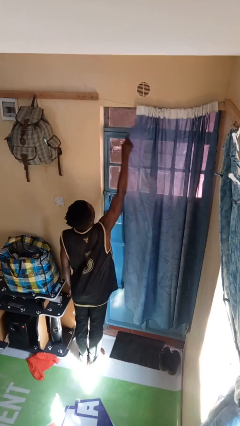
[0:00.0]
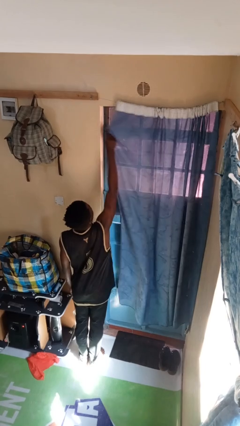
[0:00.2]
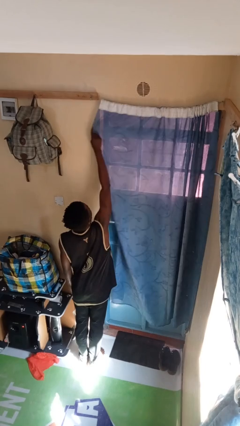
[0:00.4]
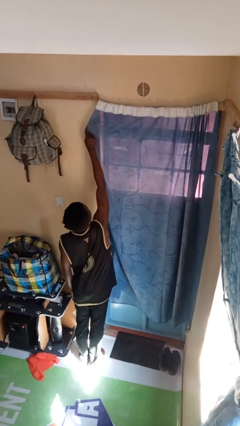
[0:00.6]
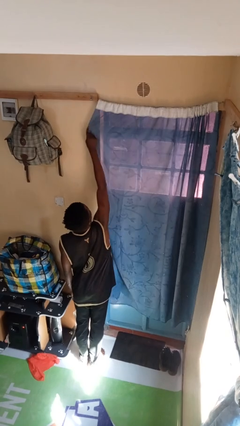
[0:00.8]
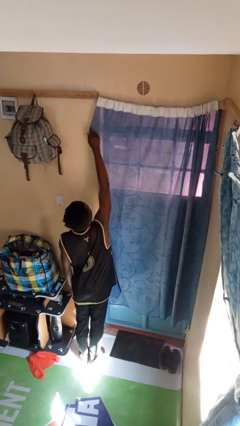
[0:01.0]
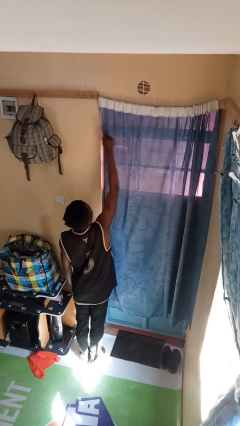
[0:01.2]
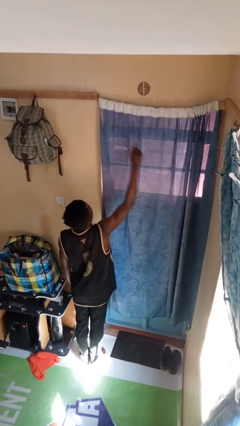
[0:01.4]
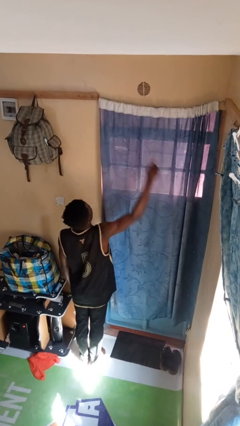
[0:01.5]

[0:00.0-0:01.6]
person closes curtains

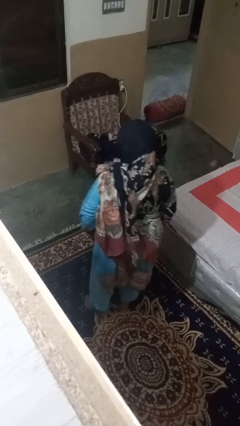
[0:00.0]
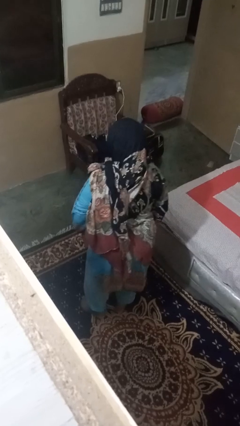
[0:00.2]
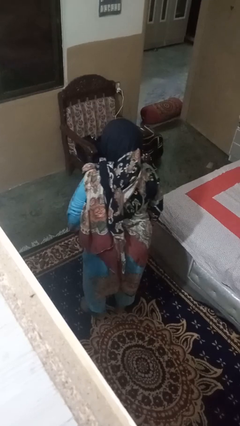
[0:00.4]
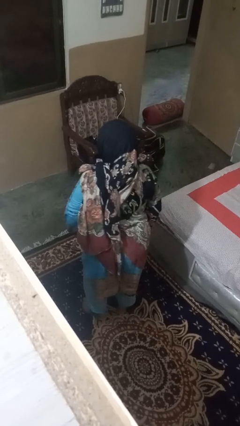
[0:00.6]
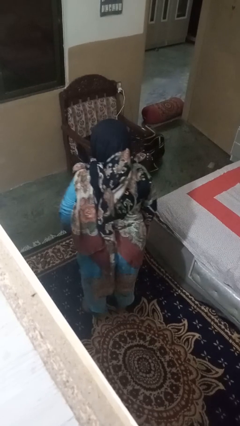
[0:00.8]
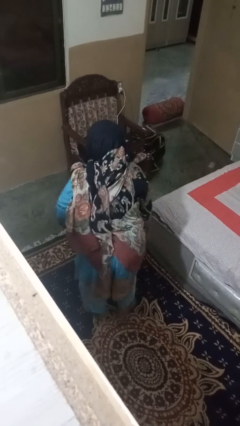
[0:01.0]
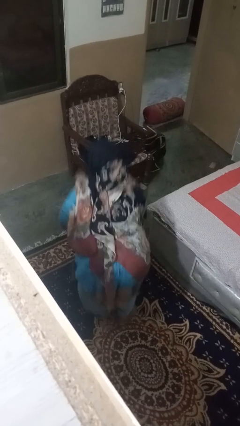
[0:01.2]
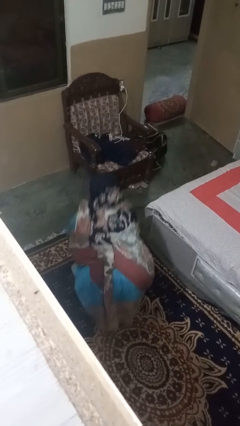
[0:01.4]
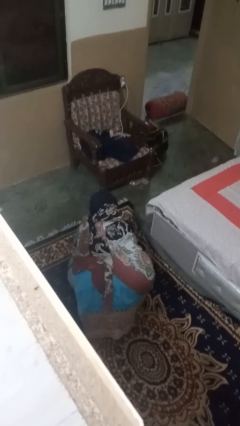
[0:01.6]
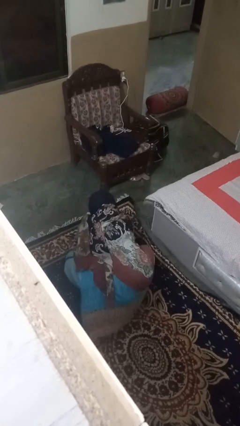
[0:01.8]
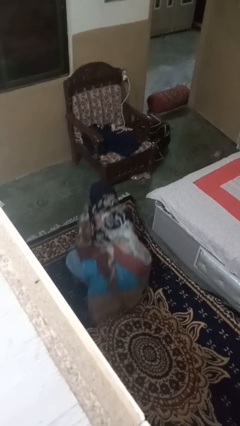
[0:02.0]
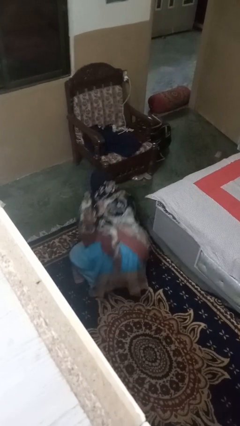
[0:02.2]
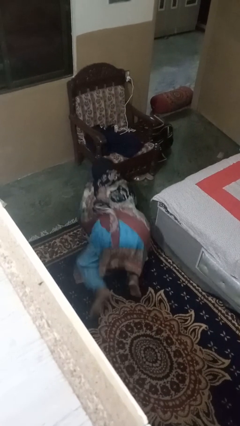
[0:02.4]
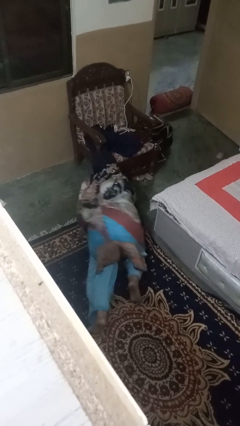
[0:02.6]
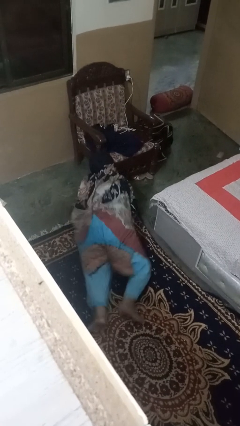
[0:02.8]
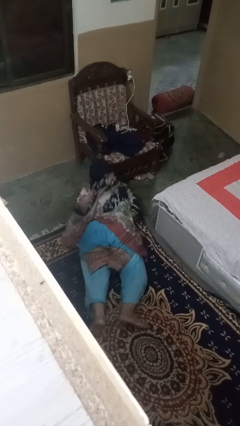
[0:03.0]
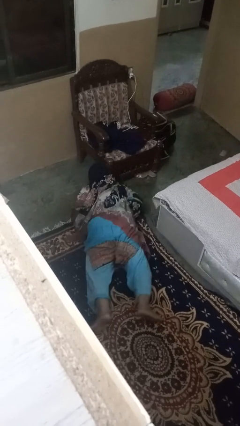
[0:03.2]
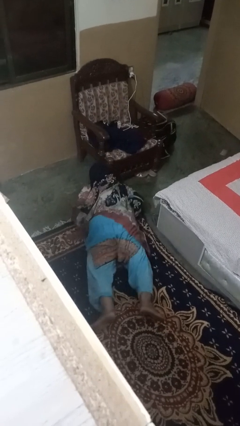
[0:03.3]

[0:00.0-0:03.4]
person exercises with pushup

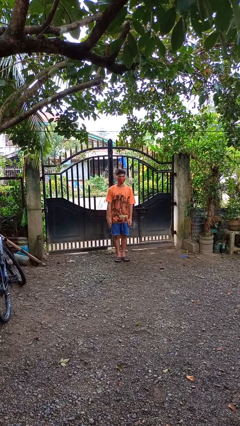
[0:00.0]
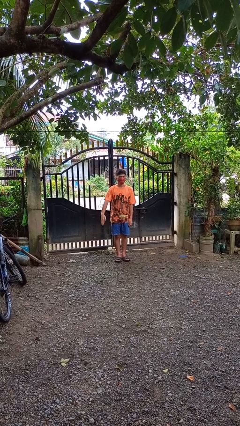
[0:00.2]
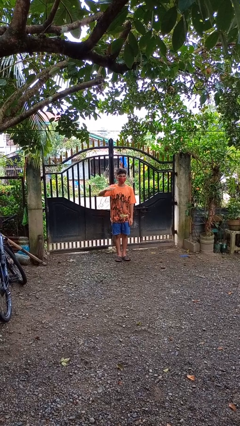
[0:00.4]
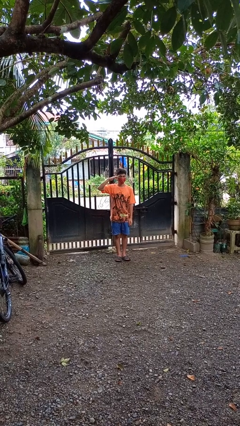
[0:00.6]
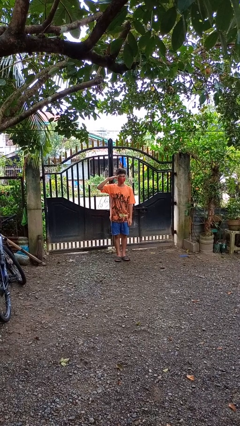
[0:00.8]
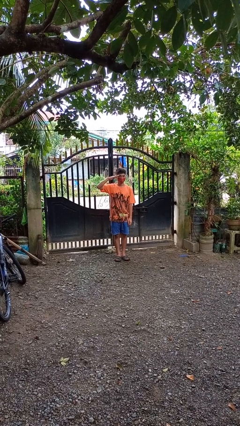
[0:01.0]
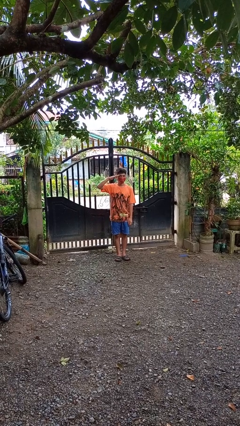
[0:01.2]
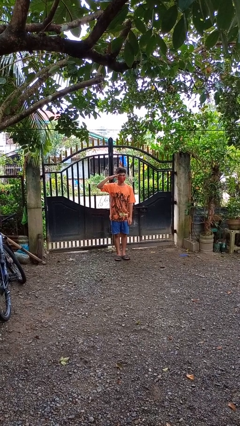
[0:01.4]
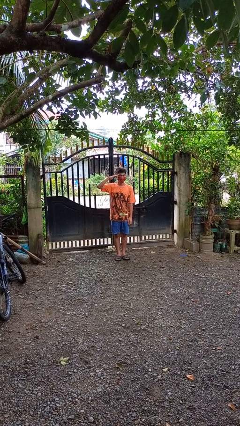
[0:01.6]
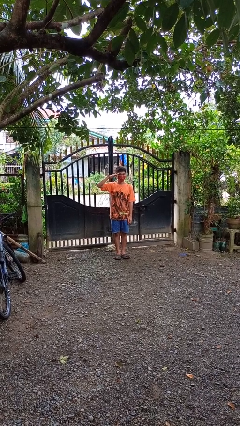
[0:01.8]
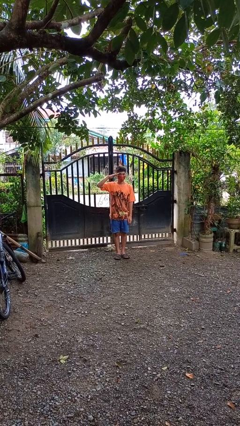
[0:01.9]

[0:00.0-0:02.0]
person salutes

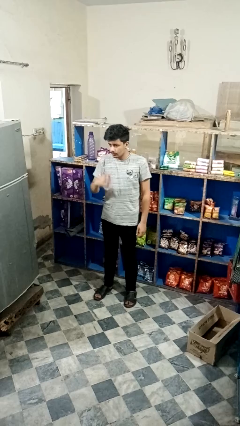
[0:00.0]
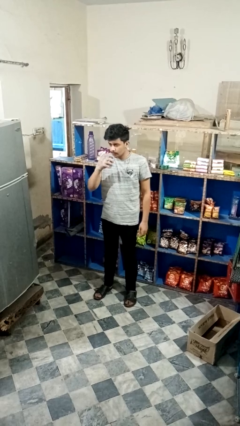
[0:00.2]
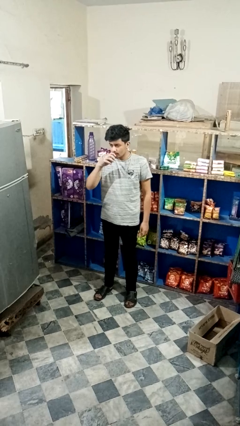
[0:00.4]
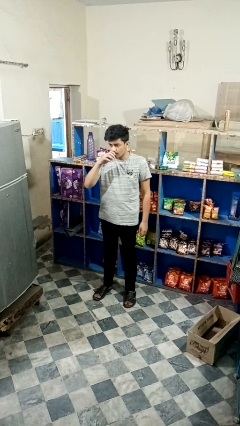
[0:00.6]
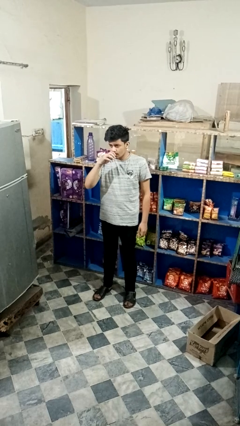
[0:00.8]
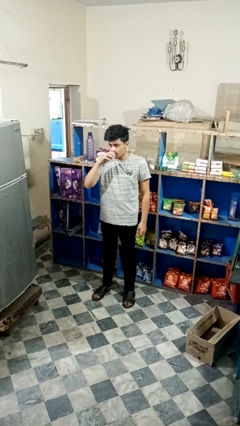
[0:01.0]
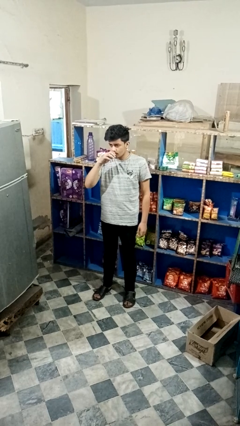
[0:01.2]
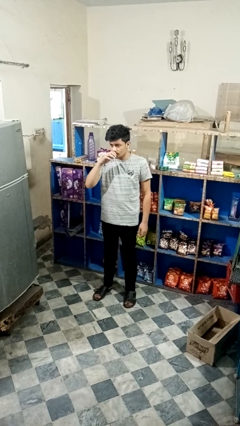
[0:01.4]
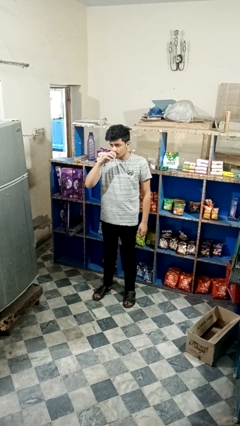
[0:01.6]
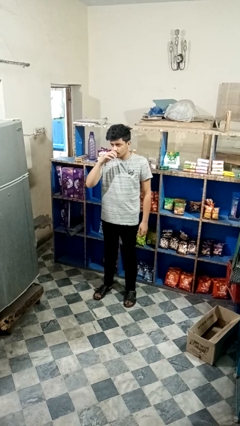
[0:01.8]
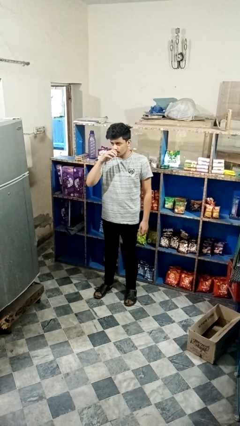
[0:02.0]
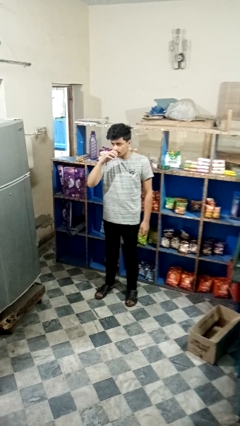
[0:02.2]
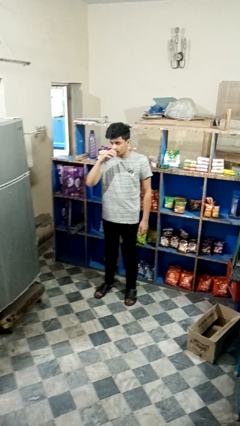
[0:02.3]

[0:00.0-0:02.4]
person vapes

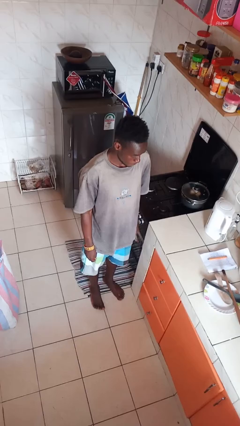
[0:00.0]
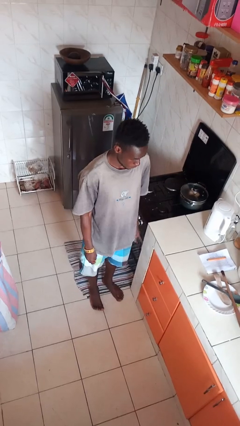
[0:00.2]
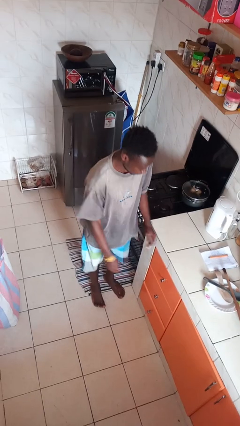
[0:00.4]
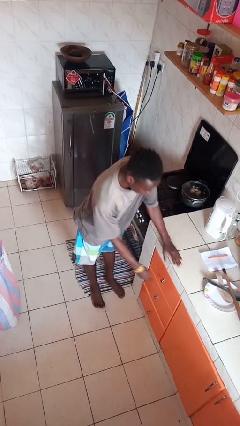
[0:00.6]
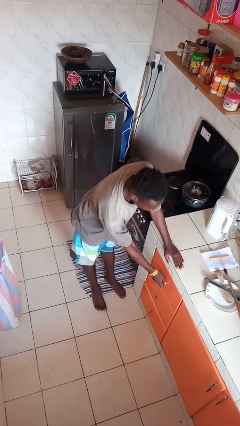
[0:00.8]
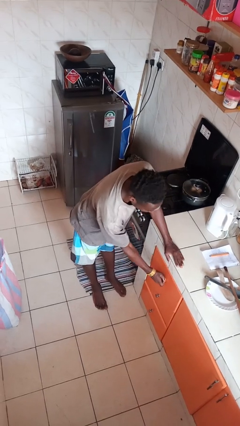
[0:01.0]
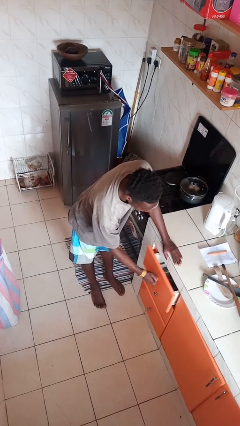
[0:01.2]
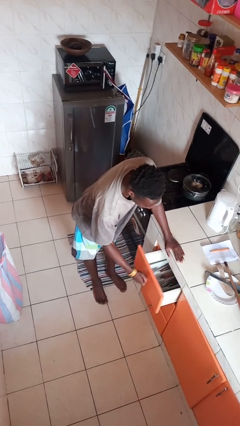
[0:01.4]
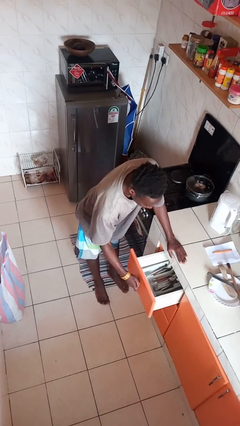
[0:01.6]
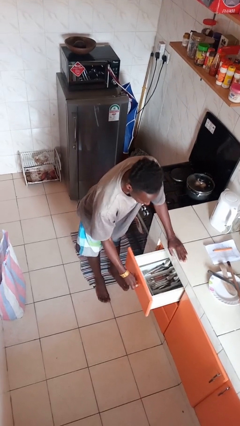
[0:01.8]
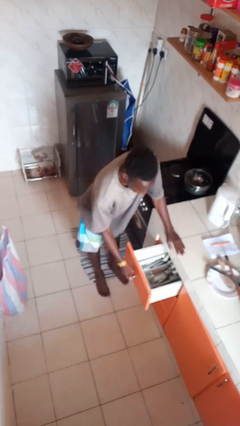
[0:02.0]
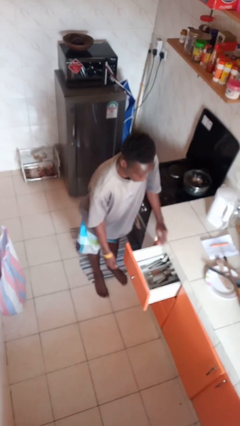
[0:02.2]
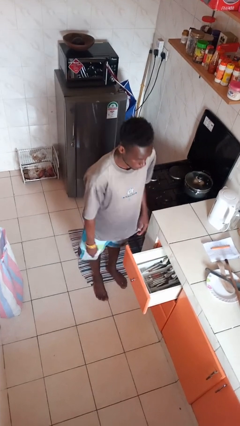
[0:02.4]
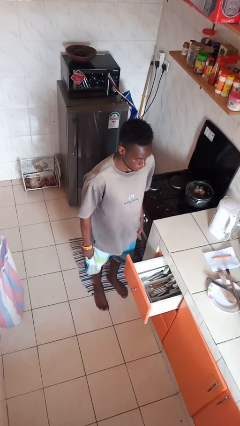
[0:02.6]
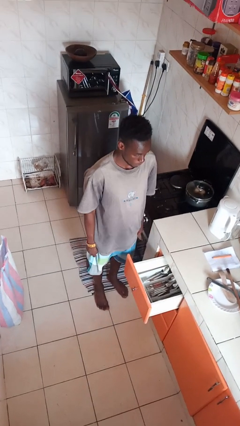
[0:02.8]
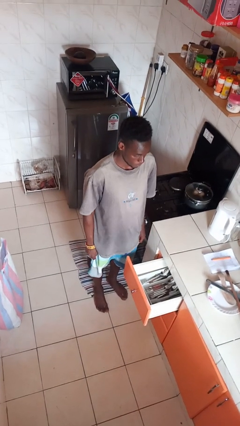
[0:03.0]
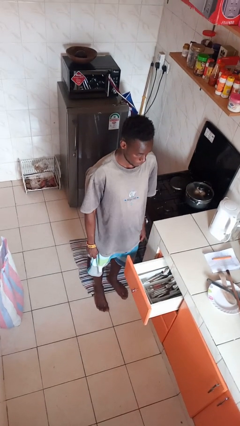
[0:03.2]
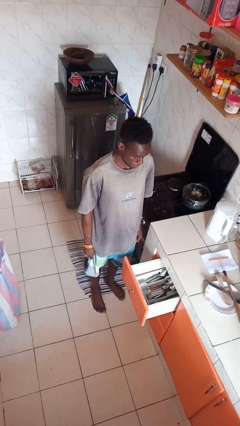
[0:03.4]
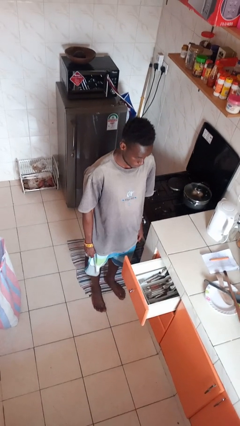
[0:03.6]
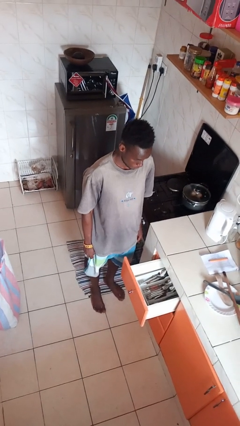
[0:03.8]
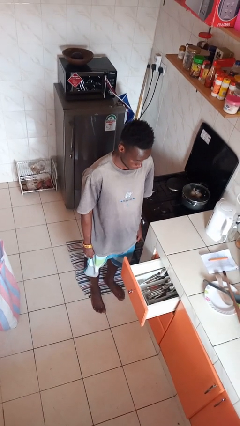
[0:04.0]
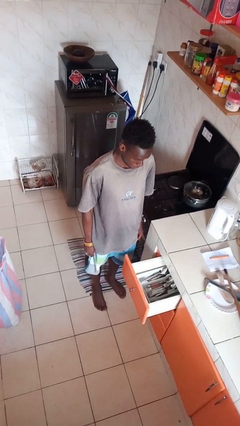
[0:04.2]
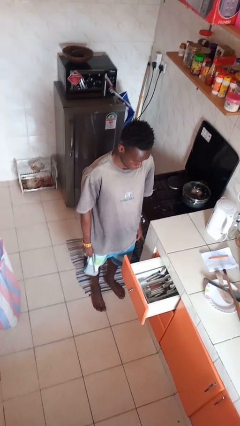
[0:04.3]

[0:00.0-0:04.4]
person opens kitchen drawer

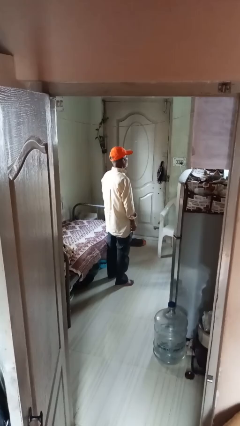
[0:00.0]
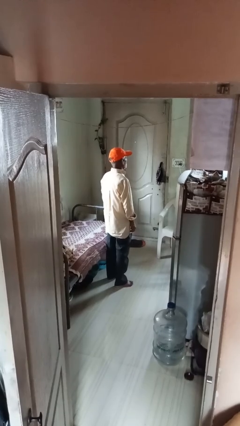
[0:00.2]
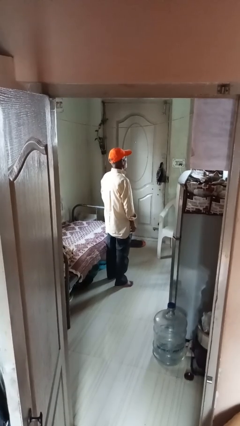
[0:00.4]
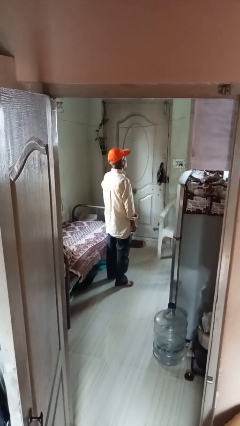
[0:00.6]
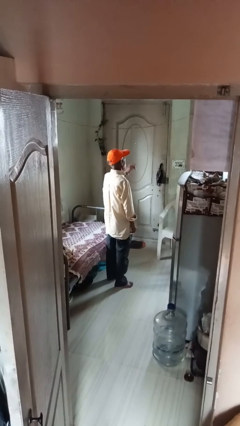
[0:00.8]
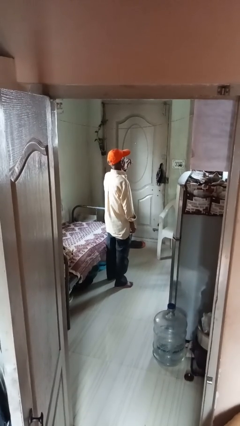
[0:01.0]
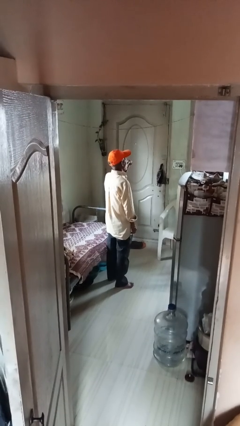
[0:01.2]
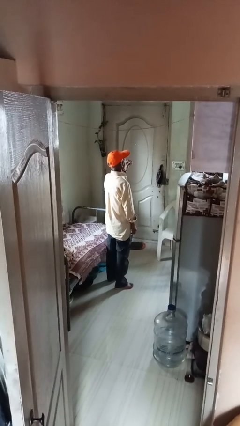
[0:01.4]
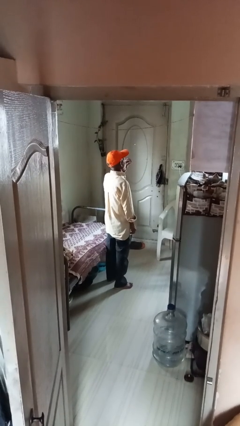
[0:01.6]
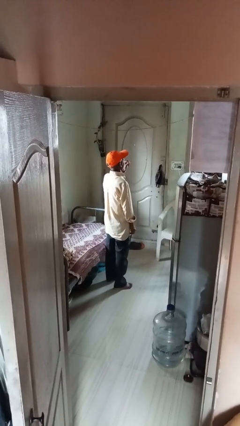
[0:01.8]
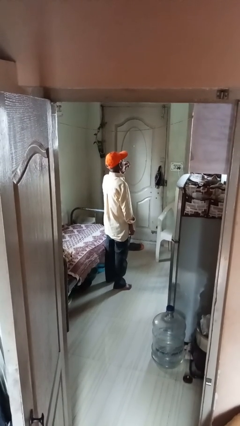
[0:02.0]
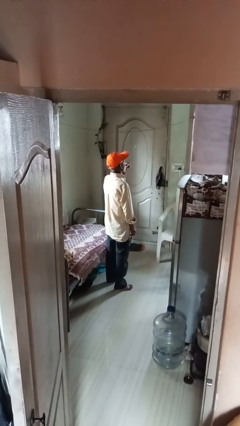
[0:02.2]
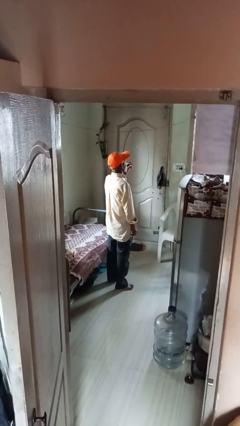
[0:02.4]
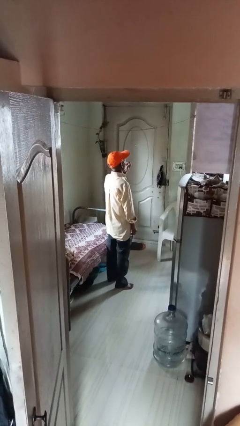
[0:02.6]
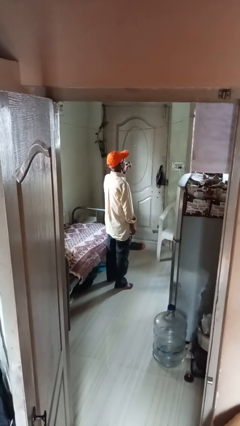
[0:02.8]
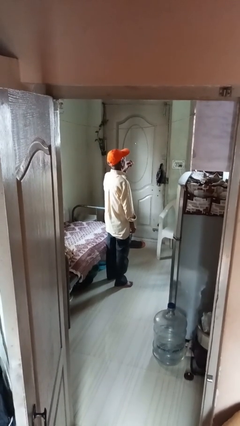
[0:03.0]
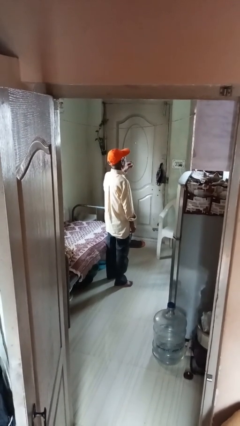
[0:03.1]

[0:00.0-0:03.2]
person yawns
